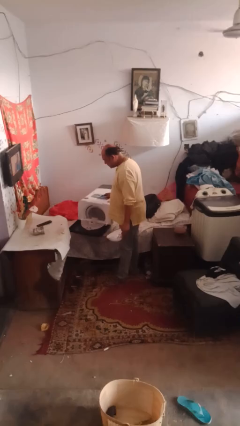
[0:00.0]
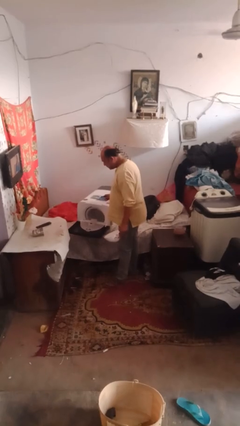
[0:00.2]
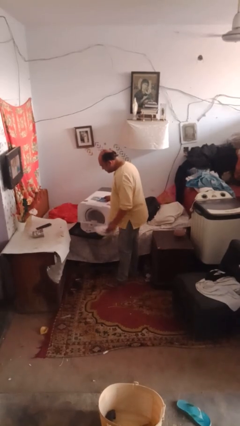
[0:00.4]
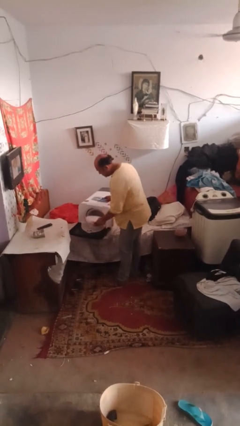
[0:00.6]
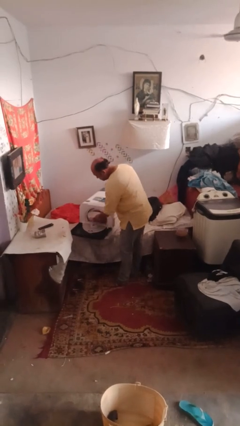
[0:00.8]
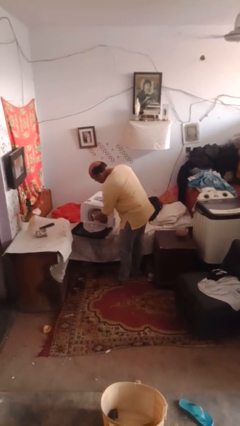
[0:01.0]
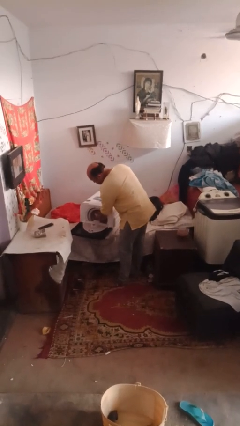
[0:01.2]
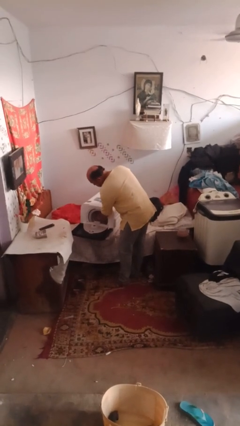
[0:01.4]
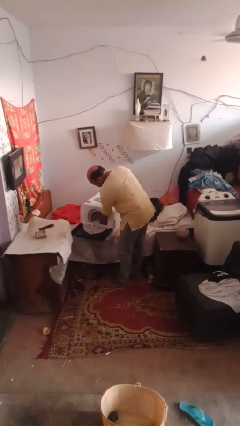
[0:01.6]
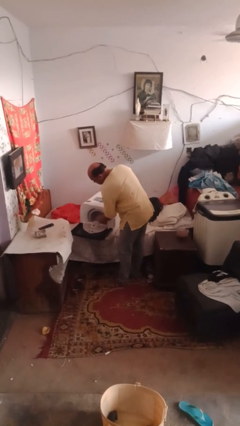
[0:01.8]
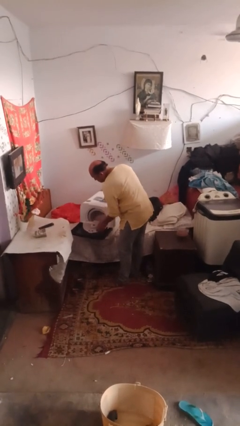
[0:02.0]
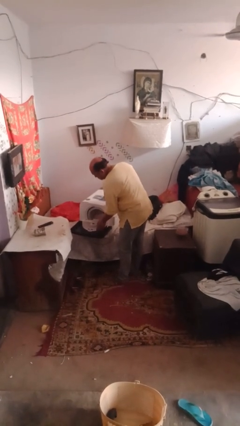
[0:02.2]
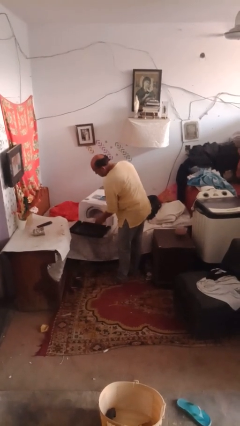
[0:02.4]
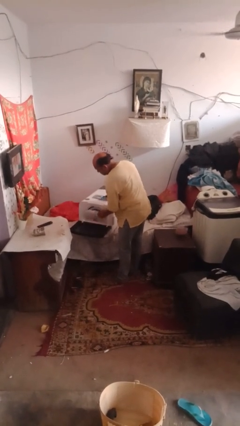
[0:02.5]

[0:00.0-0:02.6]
person loads dishwasher

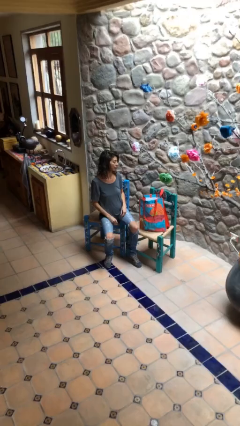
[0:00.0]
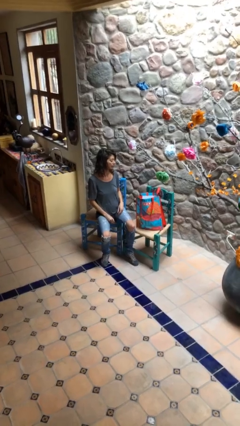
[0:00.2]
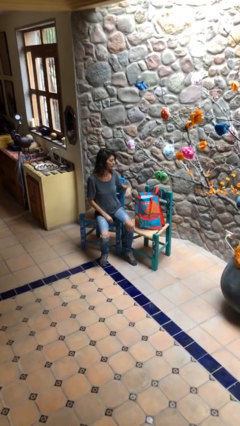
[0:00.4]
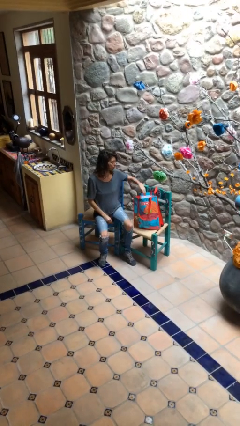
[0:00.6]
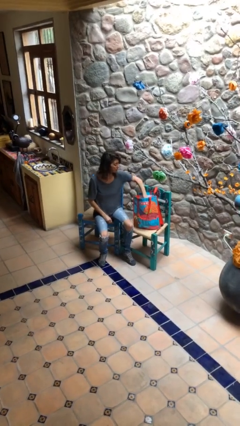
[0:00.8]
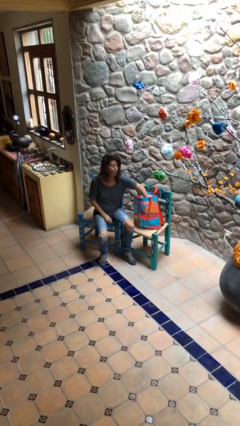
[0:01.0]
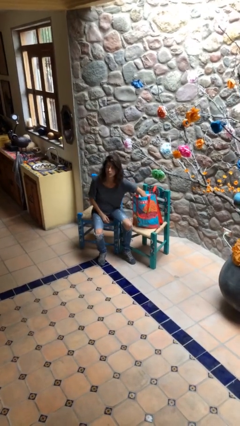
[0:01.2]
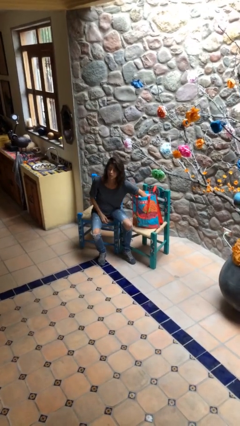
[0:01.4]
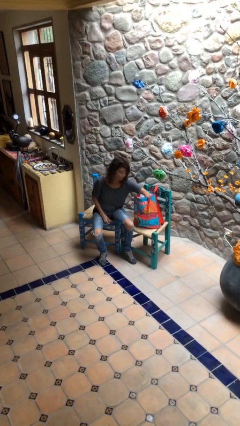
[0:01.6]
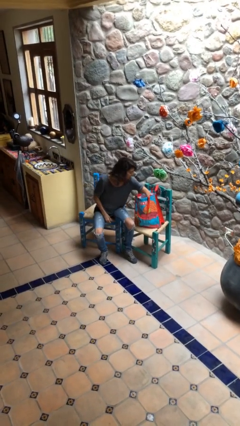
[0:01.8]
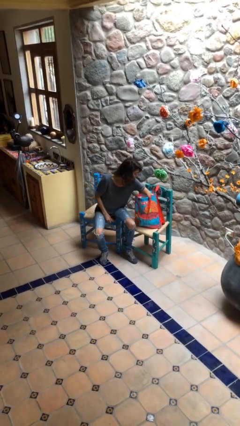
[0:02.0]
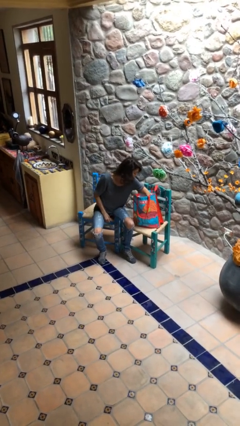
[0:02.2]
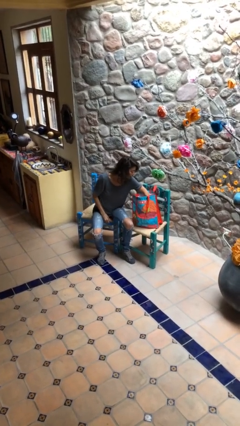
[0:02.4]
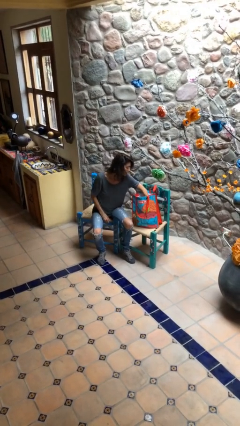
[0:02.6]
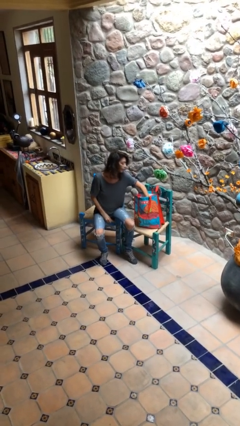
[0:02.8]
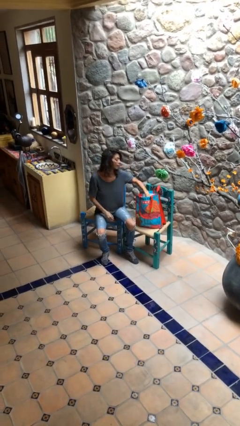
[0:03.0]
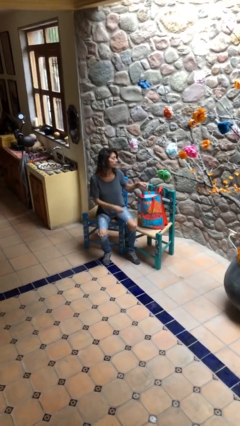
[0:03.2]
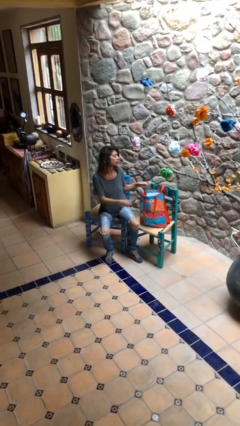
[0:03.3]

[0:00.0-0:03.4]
person searches in bag

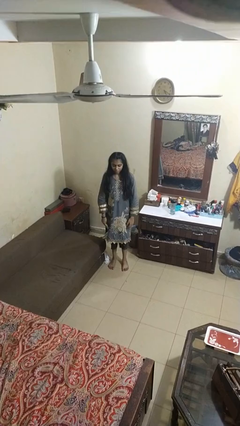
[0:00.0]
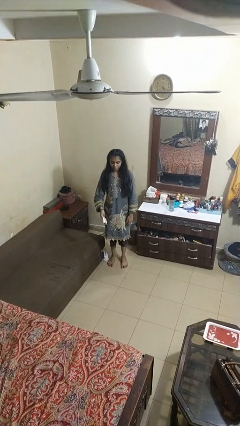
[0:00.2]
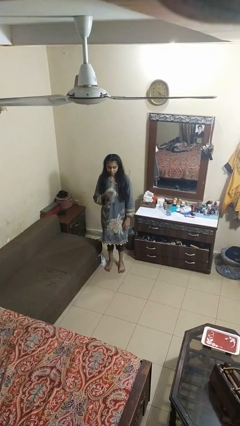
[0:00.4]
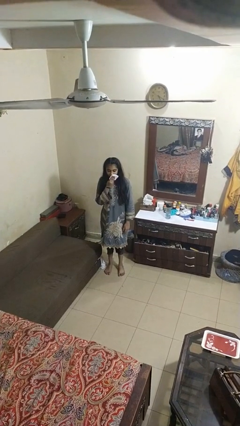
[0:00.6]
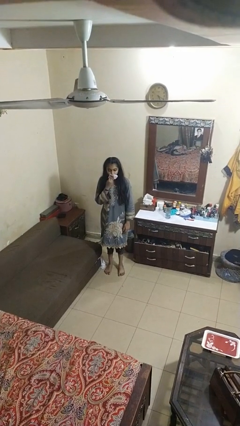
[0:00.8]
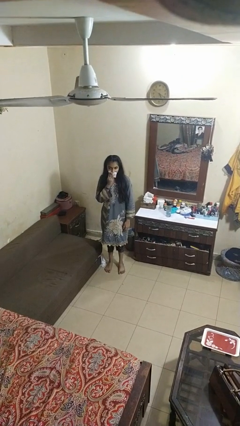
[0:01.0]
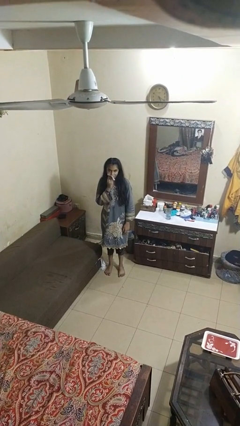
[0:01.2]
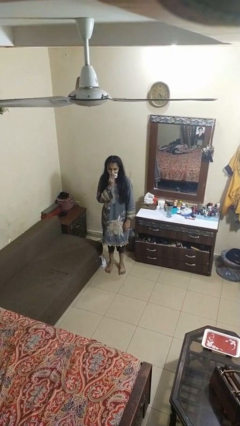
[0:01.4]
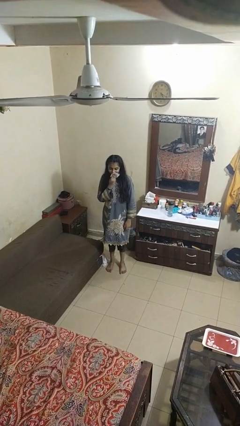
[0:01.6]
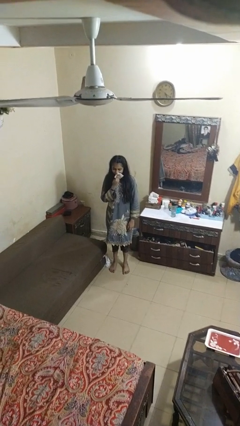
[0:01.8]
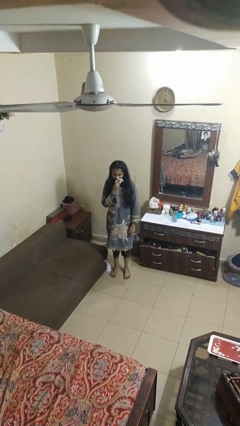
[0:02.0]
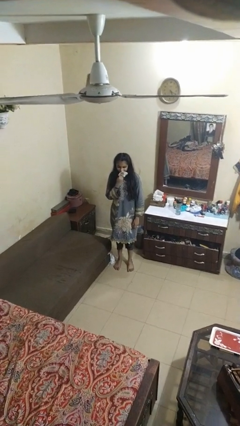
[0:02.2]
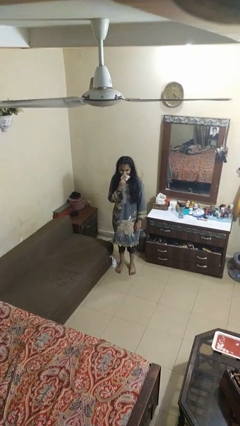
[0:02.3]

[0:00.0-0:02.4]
person wipes mouth with napkin

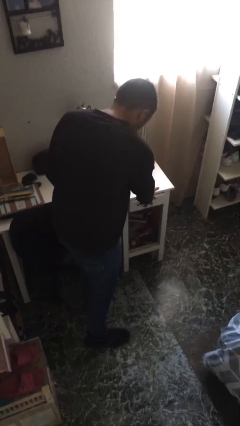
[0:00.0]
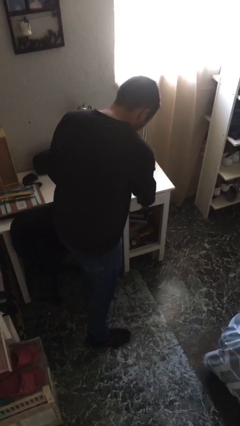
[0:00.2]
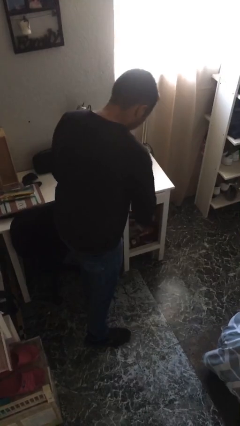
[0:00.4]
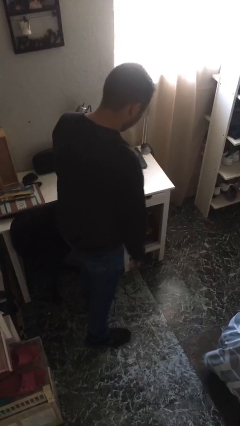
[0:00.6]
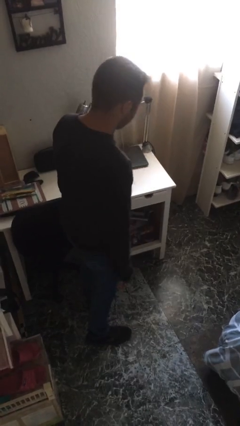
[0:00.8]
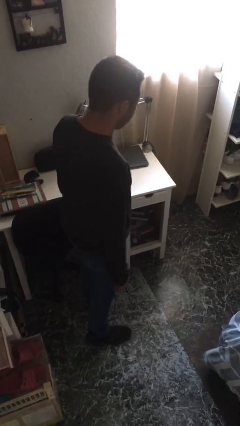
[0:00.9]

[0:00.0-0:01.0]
person closes dresser drawer

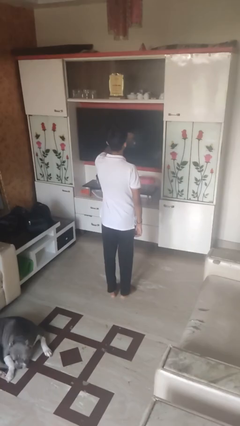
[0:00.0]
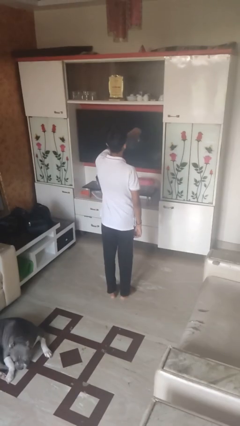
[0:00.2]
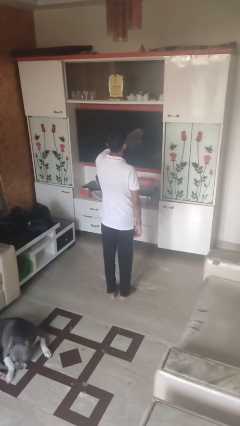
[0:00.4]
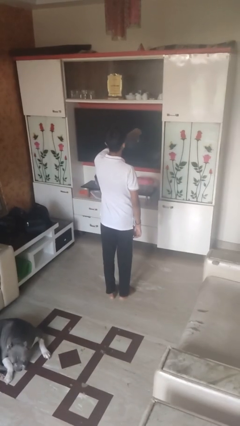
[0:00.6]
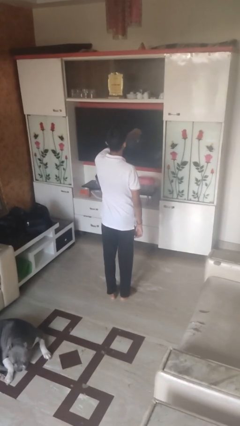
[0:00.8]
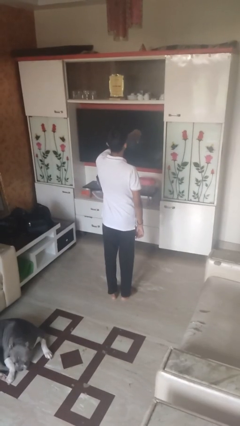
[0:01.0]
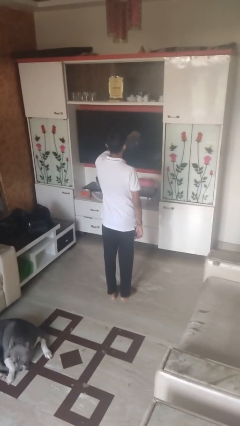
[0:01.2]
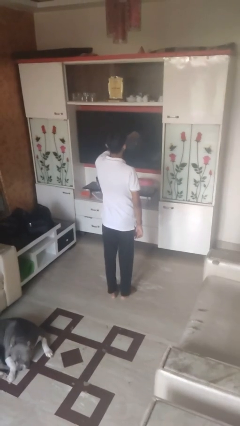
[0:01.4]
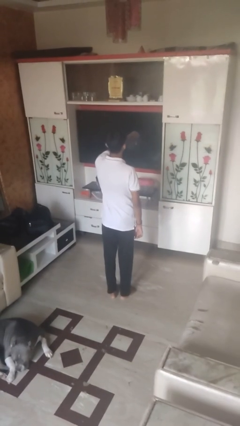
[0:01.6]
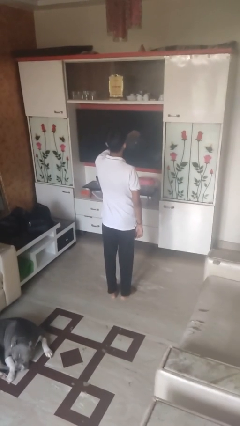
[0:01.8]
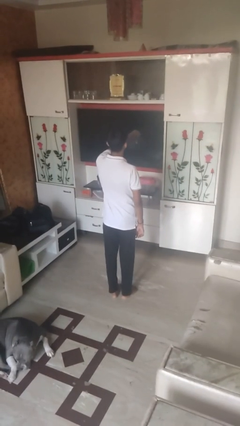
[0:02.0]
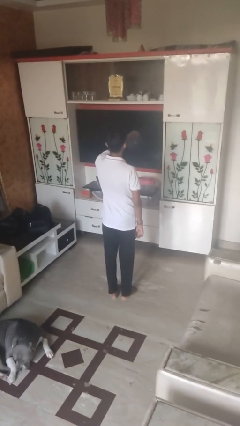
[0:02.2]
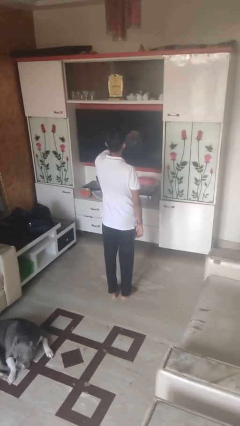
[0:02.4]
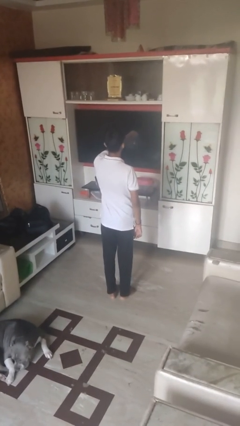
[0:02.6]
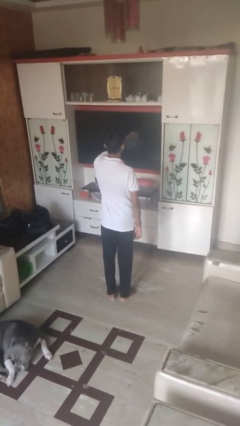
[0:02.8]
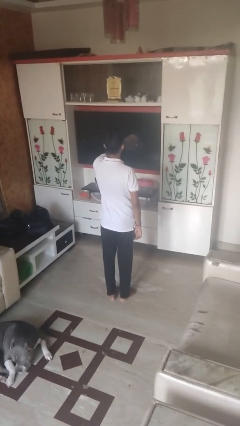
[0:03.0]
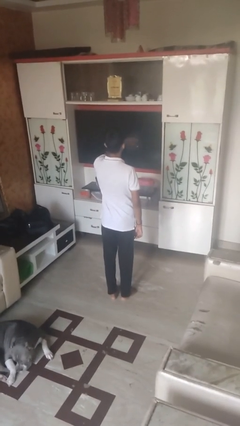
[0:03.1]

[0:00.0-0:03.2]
person gestures thumbs down

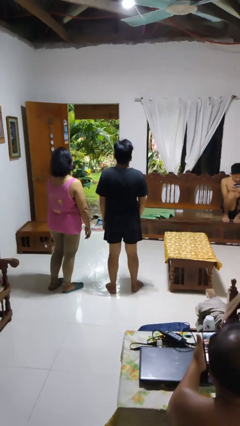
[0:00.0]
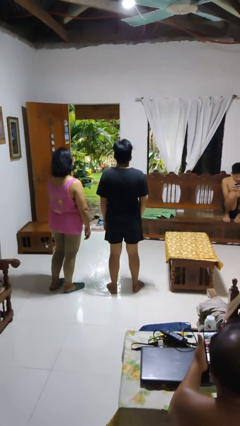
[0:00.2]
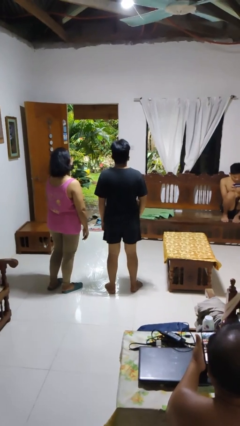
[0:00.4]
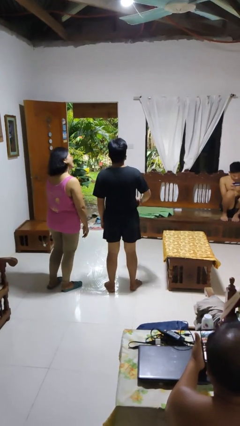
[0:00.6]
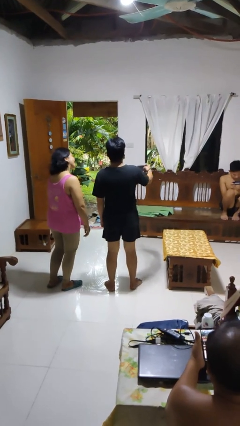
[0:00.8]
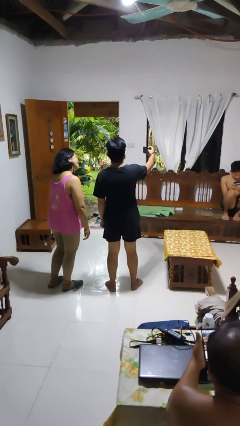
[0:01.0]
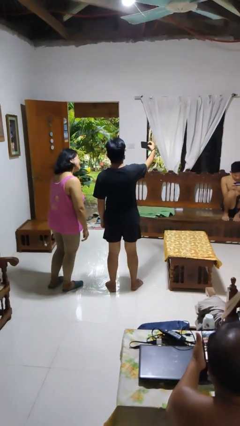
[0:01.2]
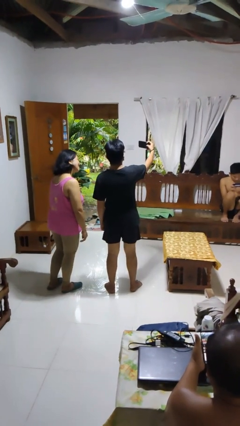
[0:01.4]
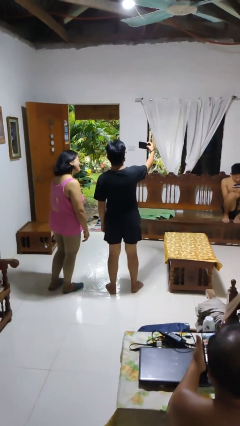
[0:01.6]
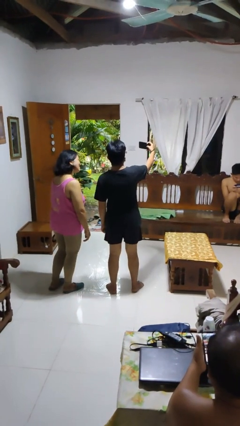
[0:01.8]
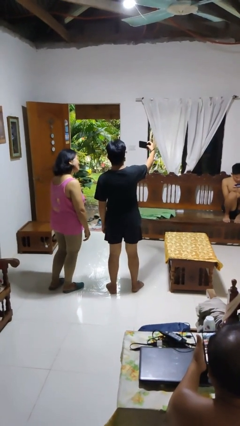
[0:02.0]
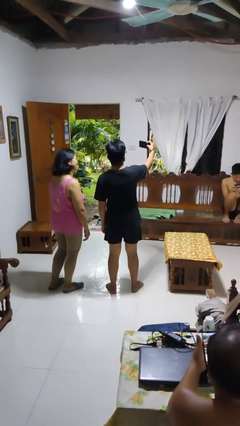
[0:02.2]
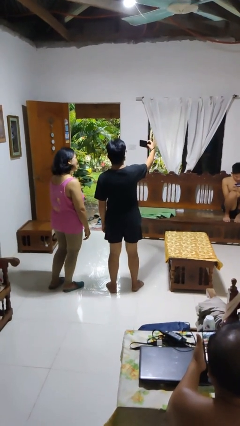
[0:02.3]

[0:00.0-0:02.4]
person takes selfie with person

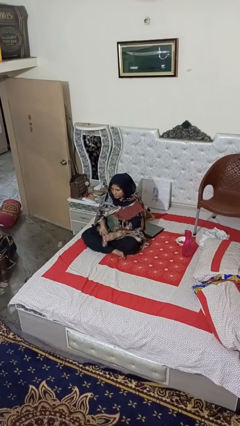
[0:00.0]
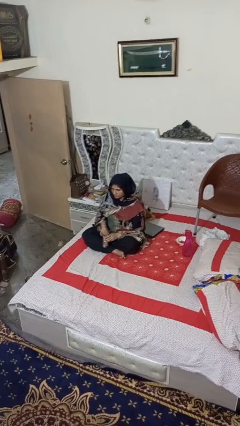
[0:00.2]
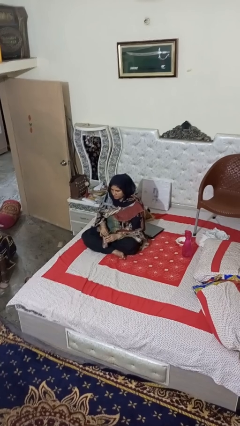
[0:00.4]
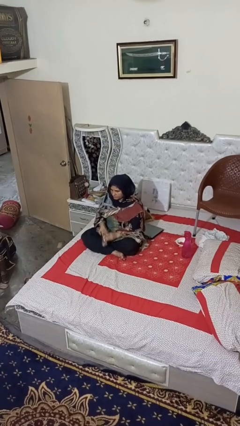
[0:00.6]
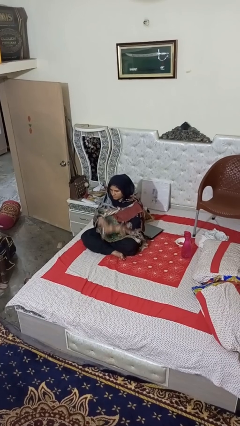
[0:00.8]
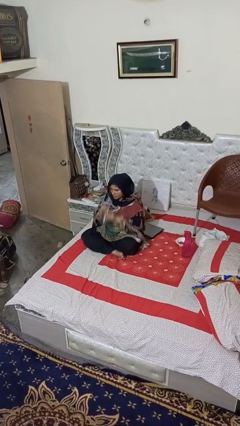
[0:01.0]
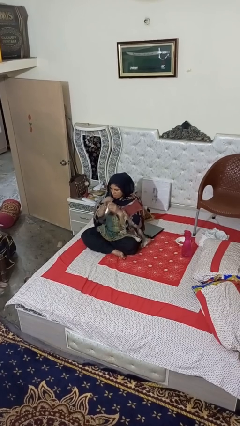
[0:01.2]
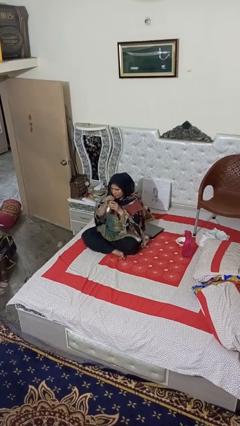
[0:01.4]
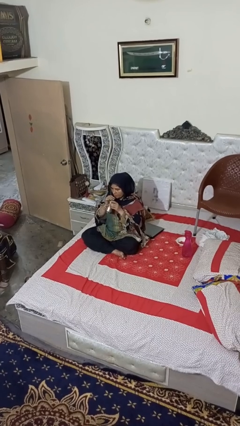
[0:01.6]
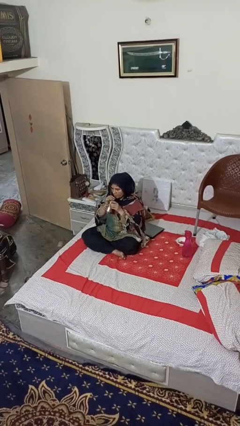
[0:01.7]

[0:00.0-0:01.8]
person drinks from straw

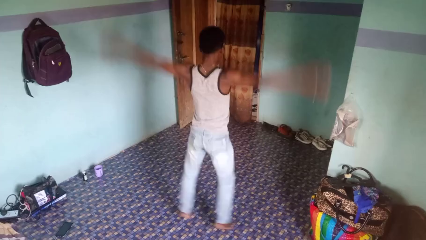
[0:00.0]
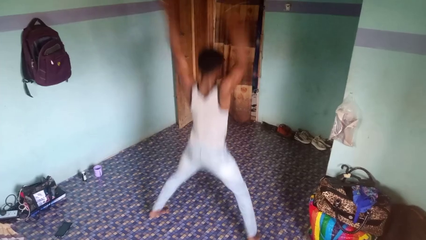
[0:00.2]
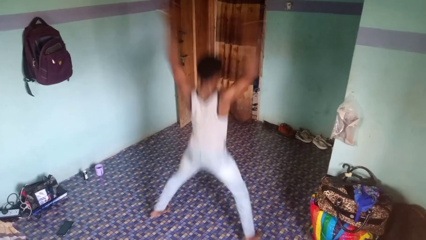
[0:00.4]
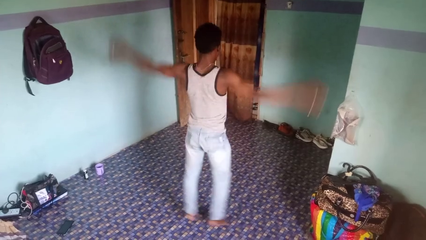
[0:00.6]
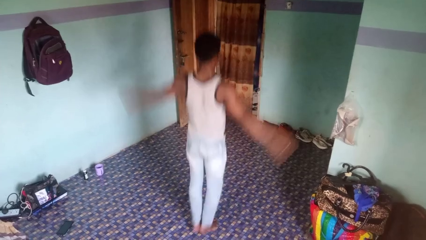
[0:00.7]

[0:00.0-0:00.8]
person exercises with jumping jacks
